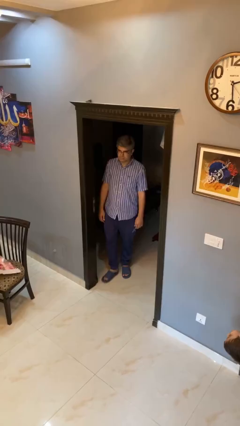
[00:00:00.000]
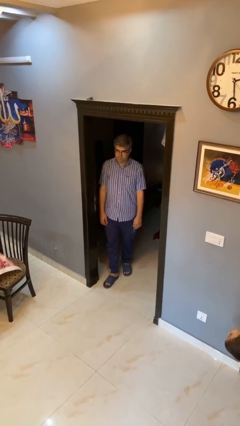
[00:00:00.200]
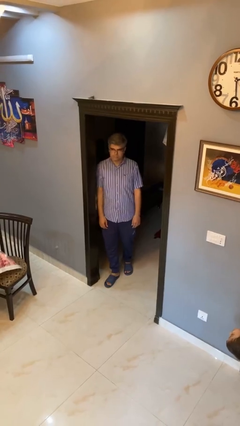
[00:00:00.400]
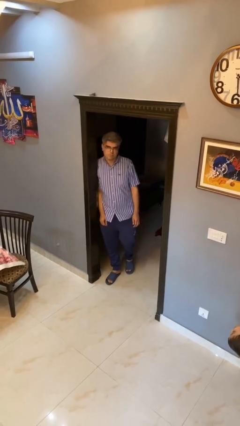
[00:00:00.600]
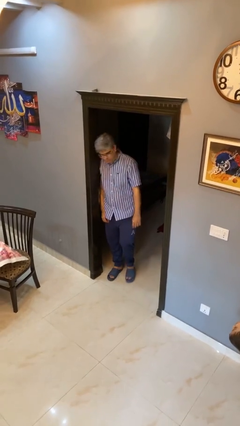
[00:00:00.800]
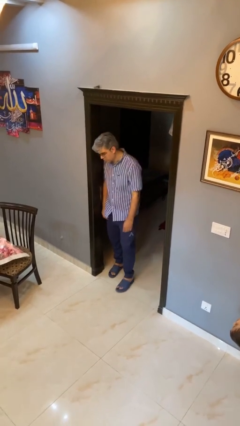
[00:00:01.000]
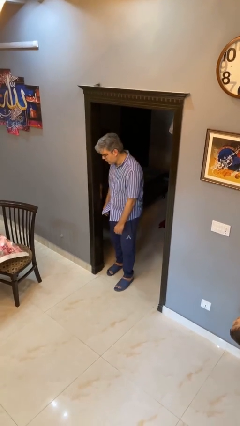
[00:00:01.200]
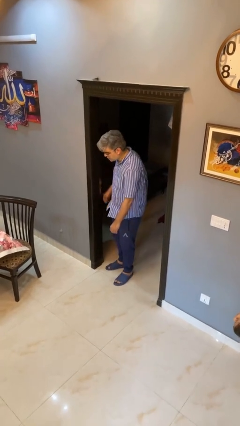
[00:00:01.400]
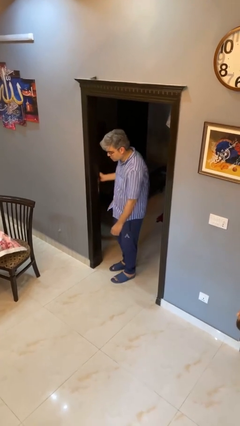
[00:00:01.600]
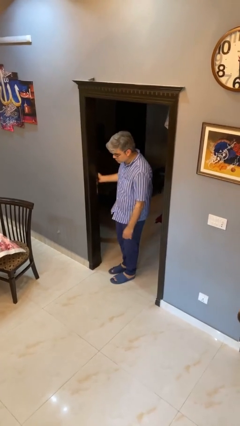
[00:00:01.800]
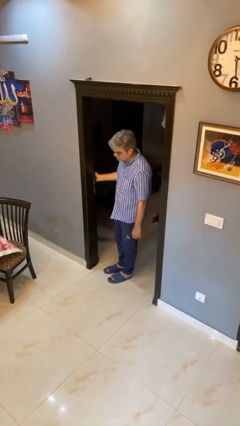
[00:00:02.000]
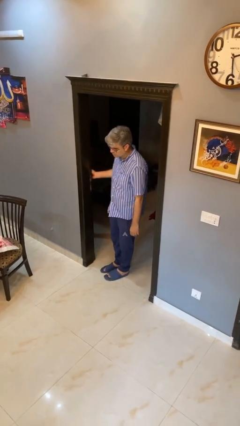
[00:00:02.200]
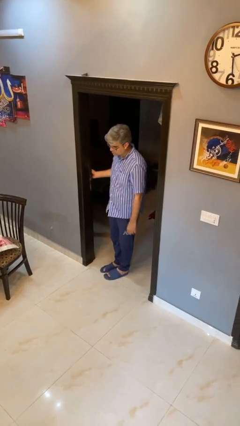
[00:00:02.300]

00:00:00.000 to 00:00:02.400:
person bumps into wall

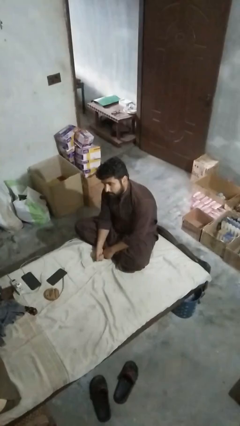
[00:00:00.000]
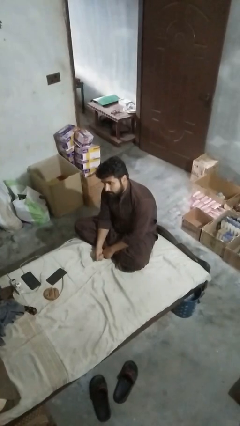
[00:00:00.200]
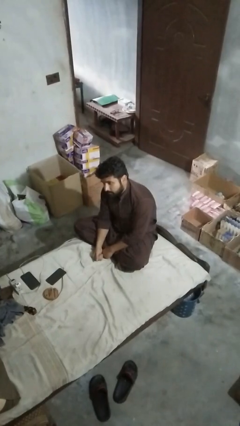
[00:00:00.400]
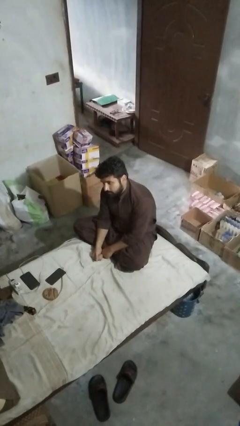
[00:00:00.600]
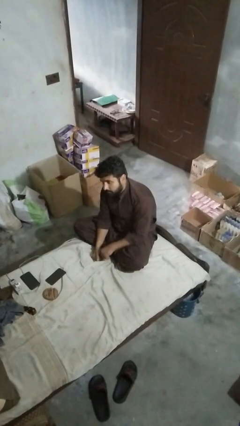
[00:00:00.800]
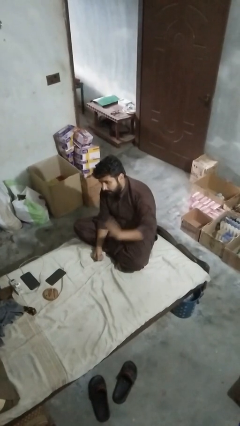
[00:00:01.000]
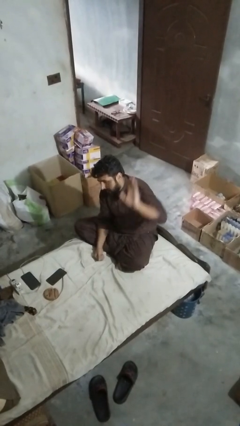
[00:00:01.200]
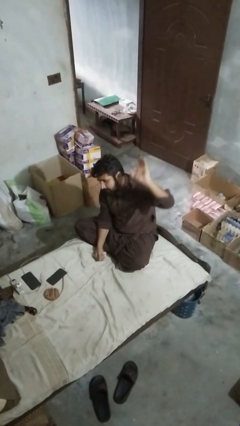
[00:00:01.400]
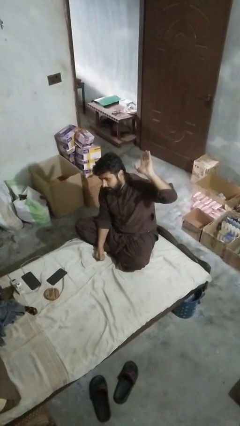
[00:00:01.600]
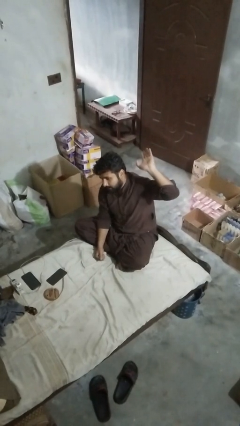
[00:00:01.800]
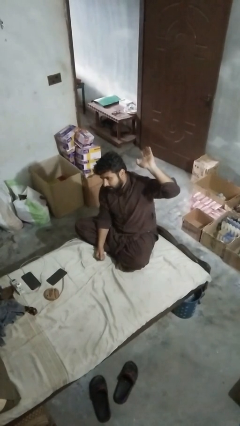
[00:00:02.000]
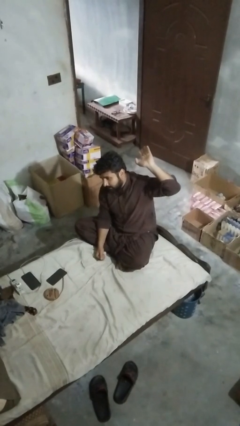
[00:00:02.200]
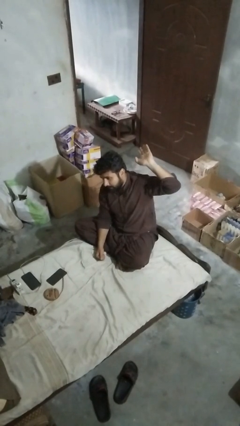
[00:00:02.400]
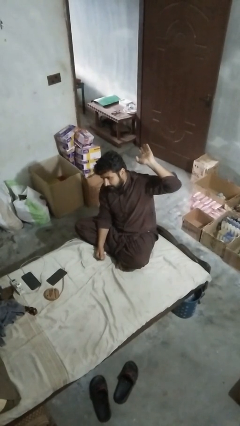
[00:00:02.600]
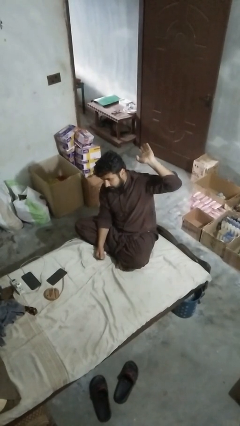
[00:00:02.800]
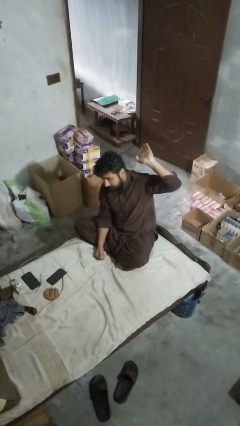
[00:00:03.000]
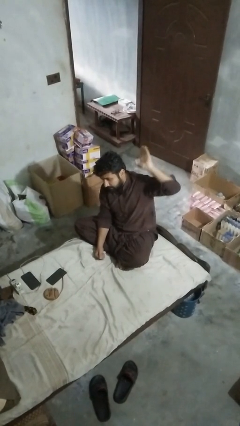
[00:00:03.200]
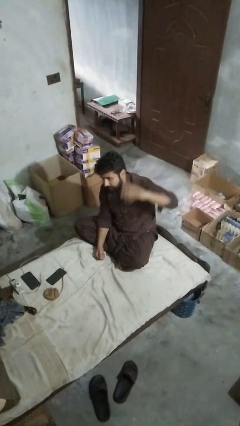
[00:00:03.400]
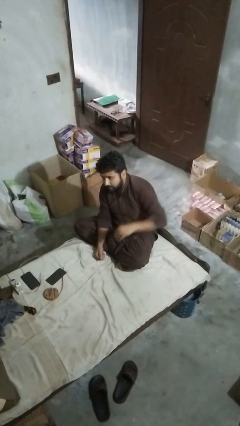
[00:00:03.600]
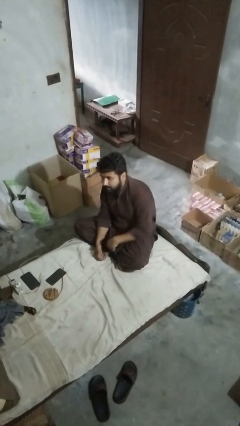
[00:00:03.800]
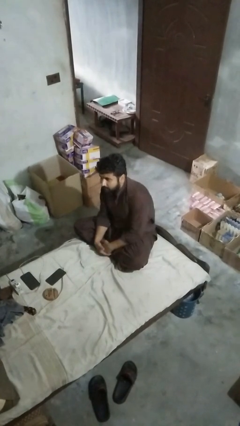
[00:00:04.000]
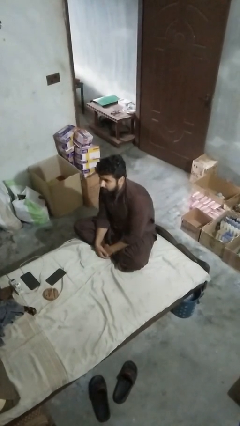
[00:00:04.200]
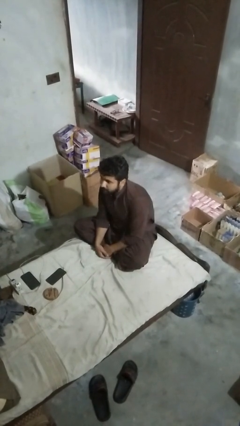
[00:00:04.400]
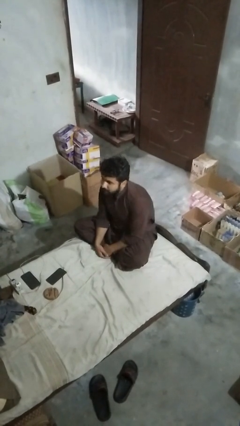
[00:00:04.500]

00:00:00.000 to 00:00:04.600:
person gestures behind me

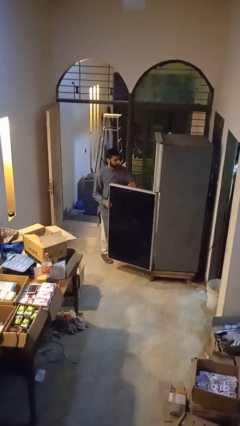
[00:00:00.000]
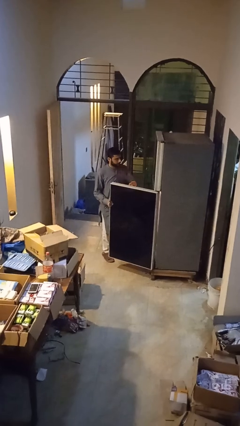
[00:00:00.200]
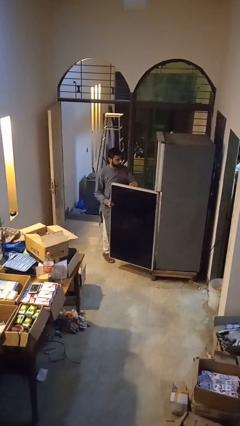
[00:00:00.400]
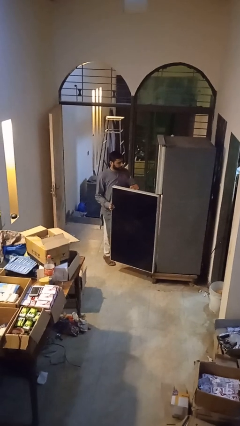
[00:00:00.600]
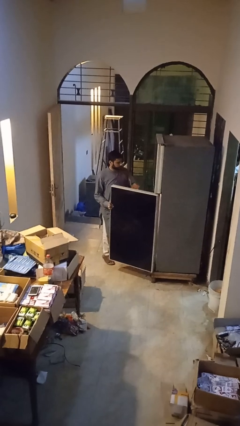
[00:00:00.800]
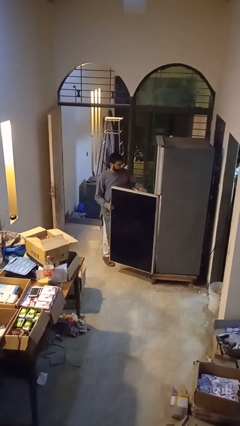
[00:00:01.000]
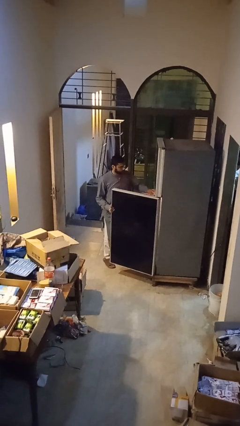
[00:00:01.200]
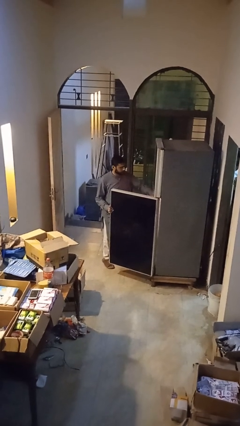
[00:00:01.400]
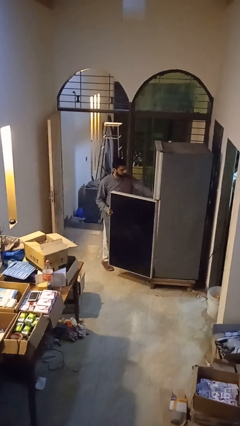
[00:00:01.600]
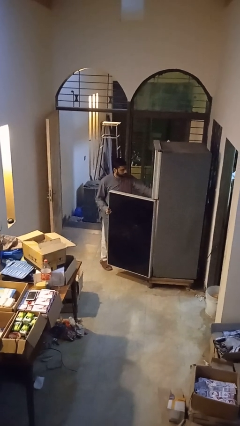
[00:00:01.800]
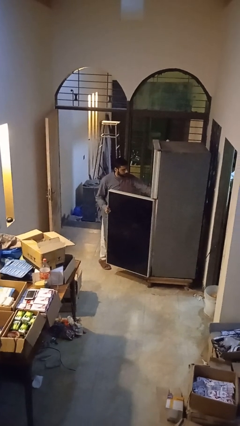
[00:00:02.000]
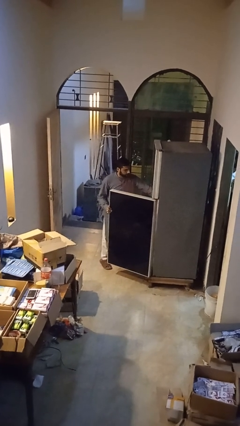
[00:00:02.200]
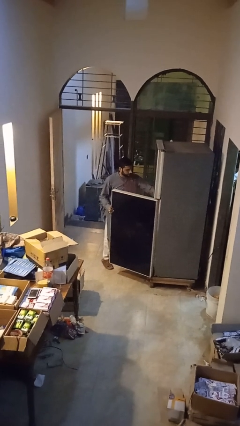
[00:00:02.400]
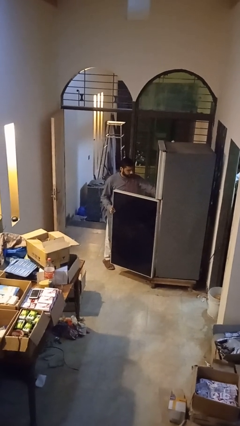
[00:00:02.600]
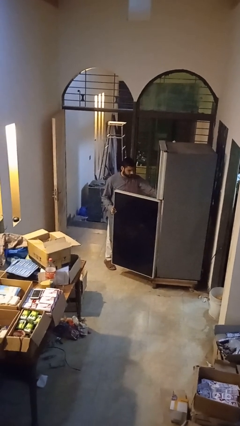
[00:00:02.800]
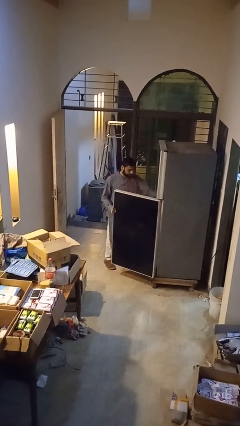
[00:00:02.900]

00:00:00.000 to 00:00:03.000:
person takes object from refrigerator

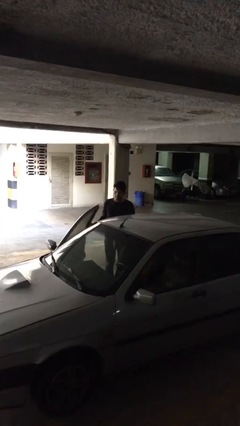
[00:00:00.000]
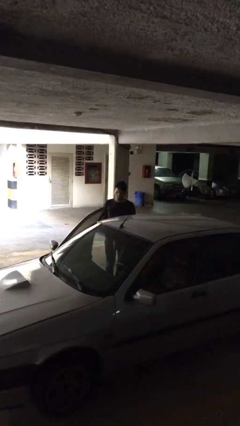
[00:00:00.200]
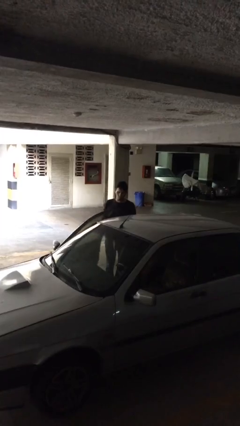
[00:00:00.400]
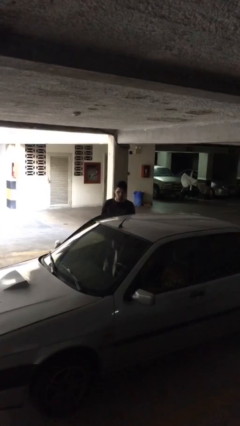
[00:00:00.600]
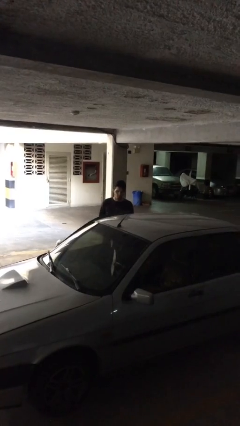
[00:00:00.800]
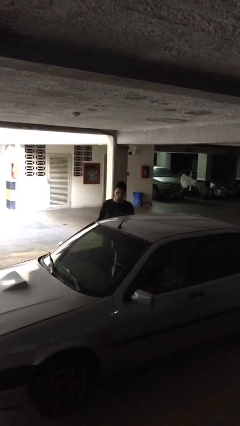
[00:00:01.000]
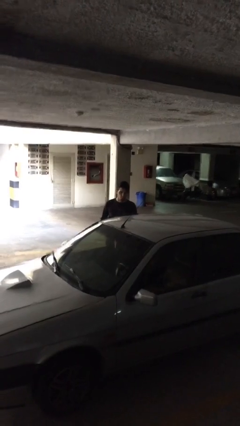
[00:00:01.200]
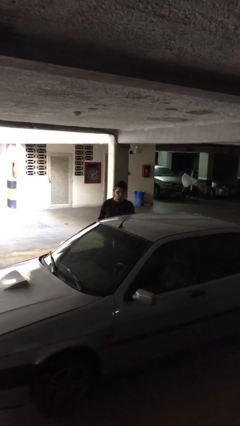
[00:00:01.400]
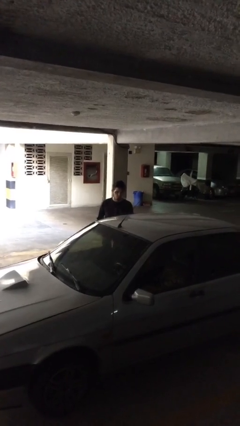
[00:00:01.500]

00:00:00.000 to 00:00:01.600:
person closes car door

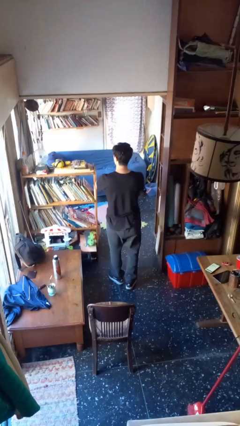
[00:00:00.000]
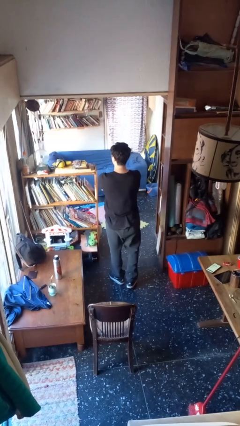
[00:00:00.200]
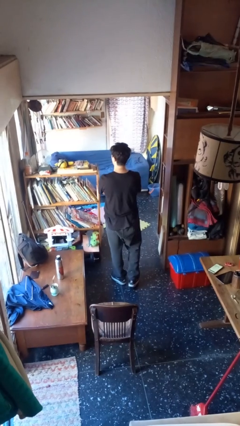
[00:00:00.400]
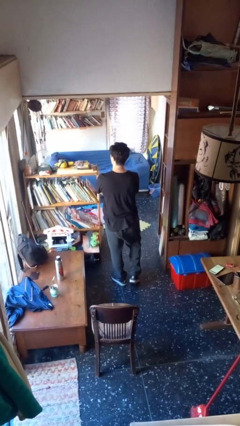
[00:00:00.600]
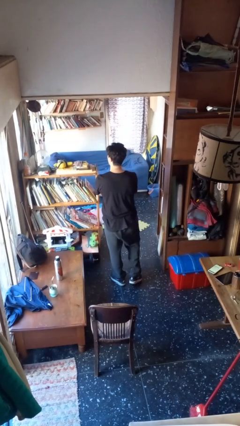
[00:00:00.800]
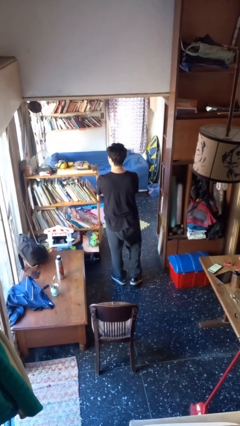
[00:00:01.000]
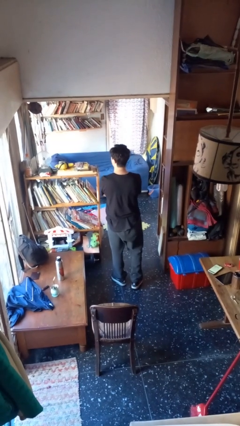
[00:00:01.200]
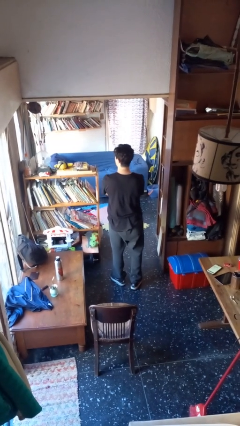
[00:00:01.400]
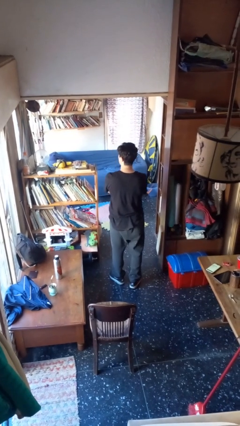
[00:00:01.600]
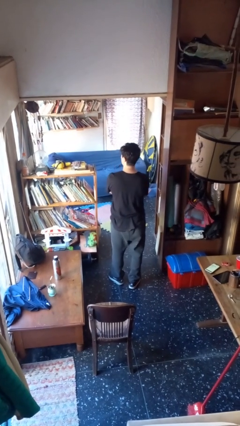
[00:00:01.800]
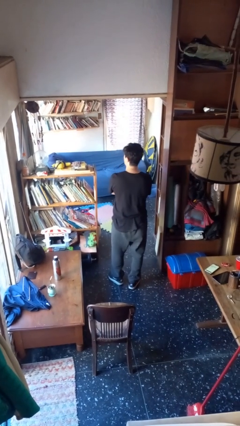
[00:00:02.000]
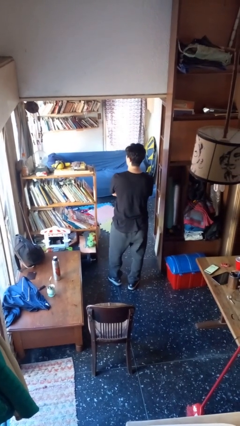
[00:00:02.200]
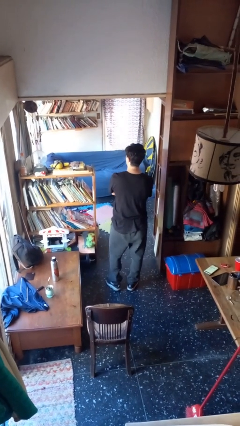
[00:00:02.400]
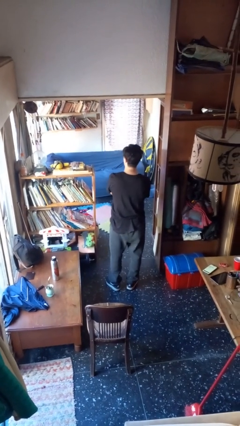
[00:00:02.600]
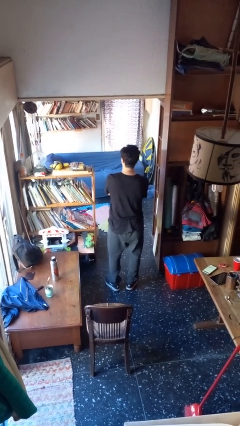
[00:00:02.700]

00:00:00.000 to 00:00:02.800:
person crosses arms

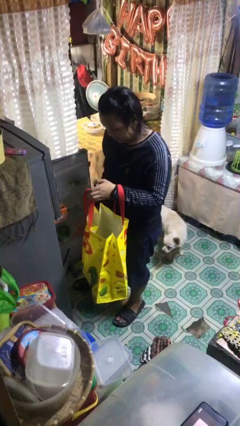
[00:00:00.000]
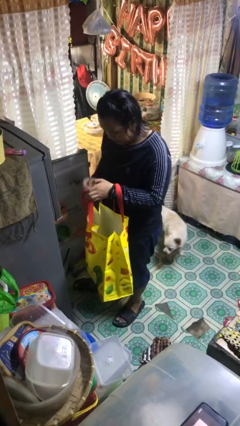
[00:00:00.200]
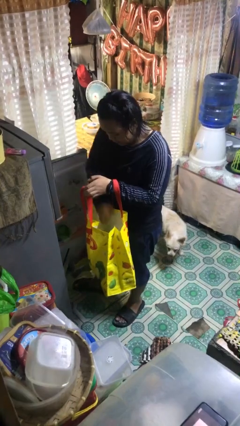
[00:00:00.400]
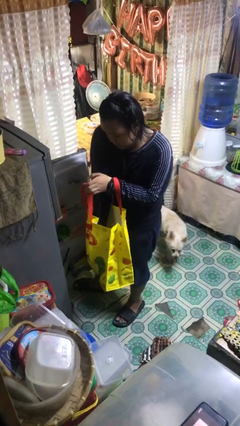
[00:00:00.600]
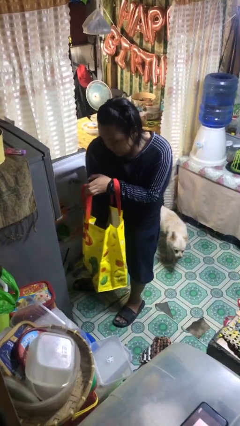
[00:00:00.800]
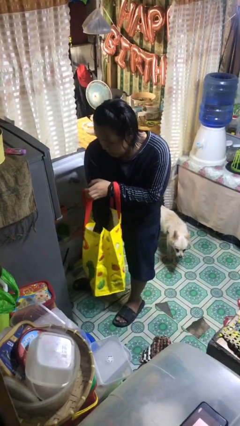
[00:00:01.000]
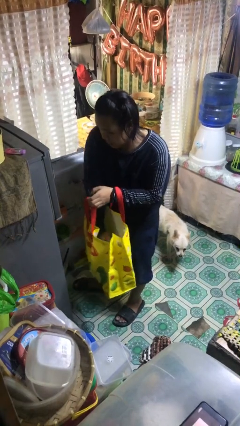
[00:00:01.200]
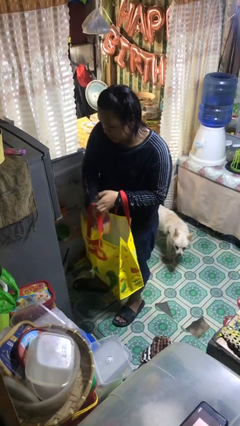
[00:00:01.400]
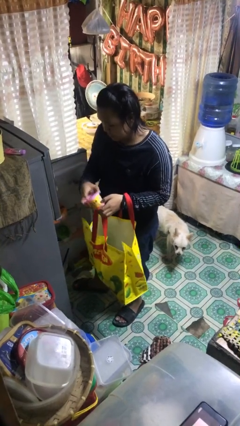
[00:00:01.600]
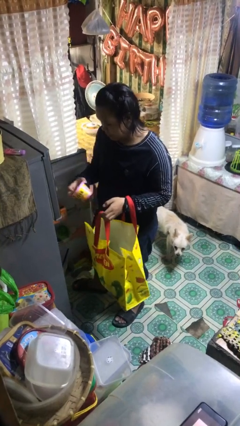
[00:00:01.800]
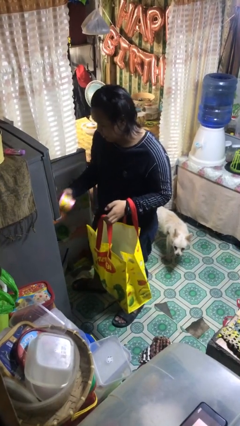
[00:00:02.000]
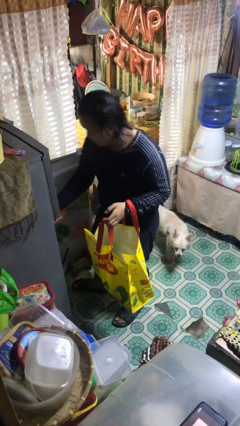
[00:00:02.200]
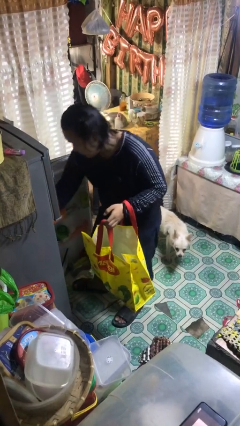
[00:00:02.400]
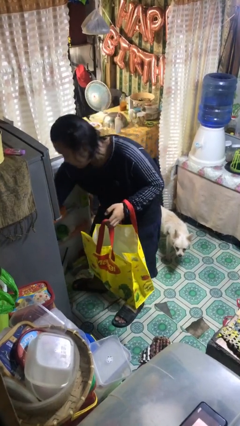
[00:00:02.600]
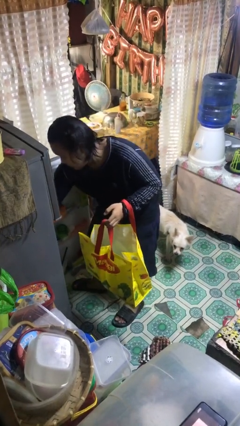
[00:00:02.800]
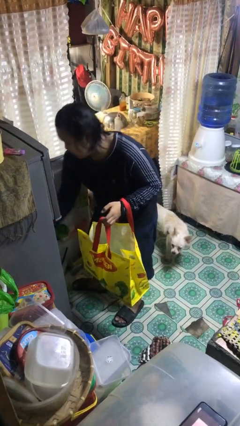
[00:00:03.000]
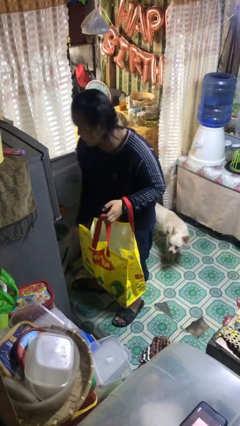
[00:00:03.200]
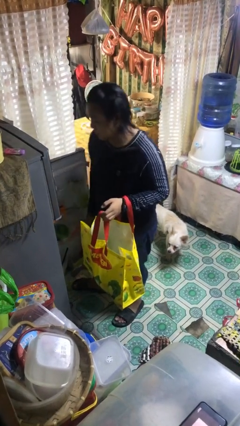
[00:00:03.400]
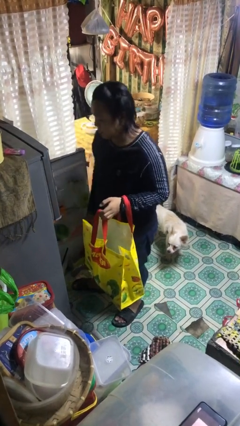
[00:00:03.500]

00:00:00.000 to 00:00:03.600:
person loads groceries into refrigerator
